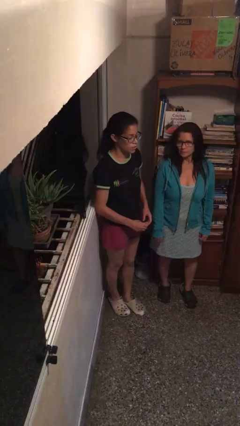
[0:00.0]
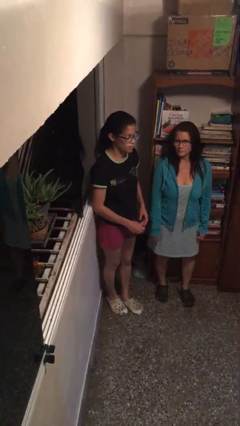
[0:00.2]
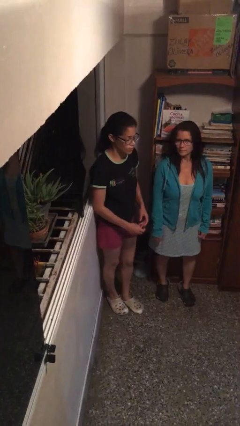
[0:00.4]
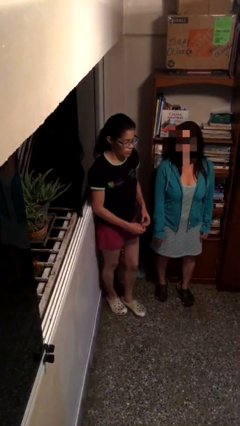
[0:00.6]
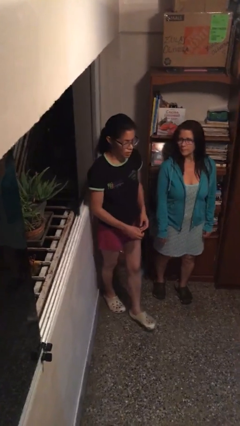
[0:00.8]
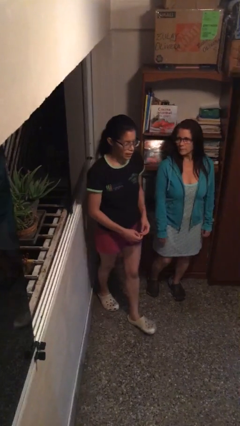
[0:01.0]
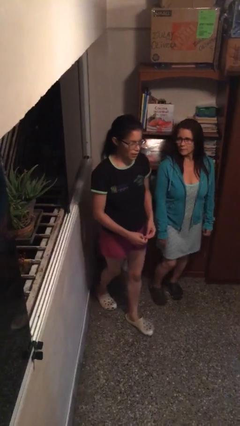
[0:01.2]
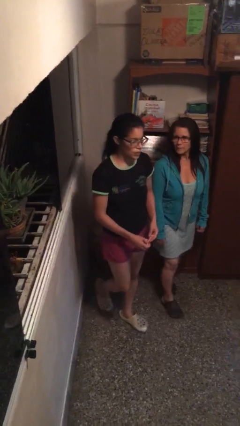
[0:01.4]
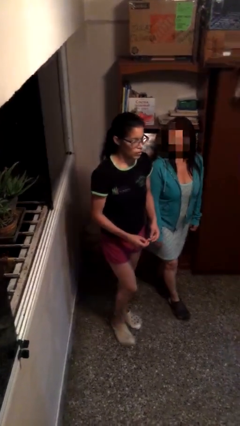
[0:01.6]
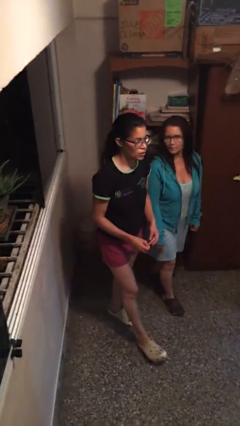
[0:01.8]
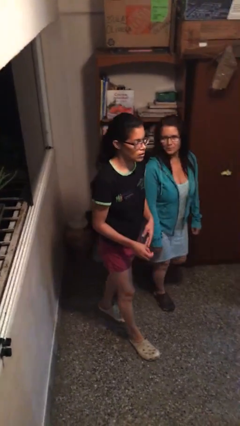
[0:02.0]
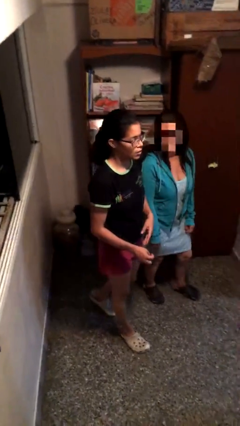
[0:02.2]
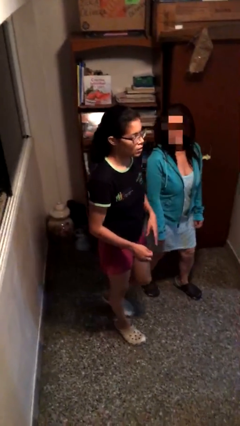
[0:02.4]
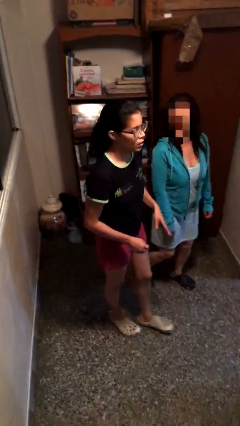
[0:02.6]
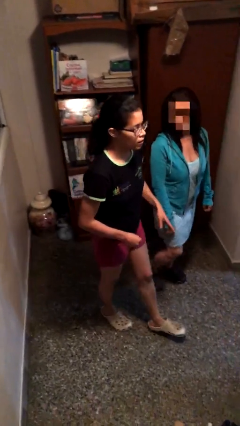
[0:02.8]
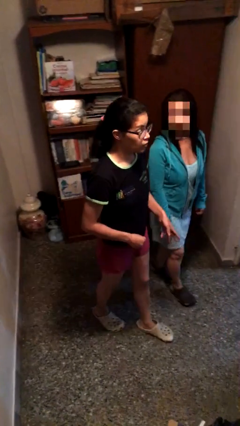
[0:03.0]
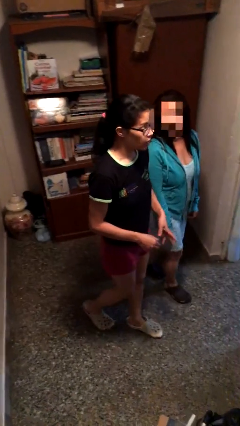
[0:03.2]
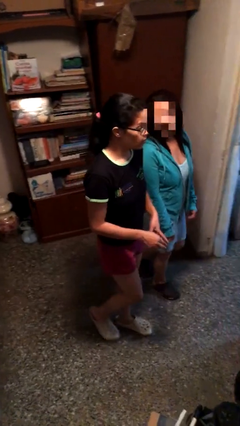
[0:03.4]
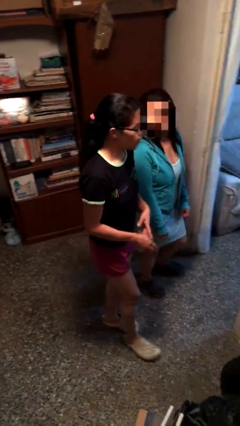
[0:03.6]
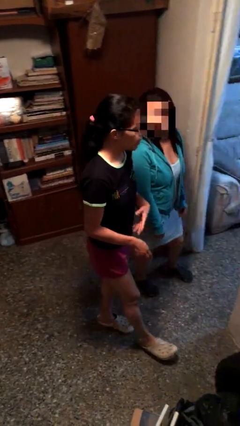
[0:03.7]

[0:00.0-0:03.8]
person talks to person

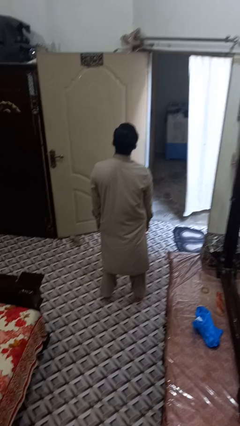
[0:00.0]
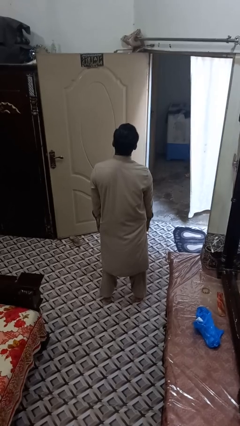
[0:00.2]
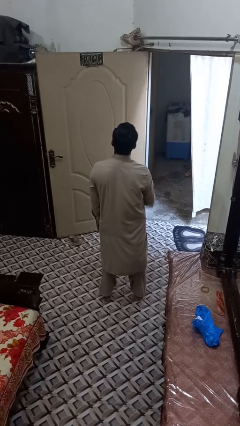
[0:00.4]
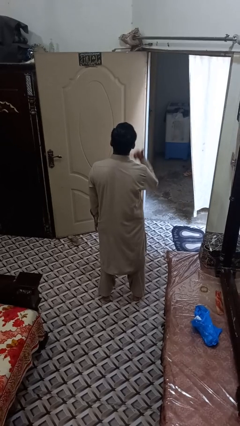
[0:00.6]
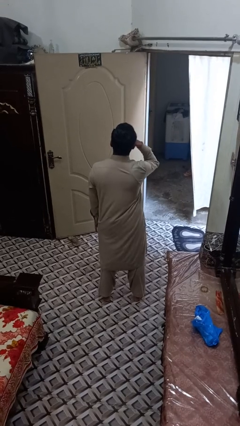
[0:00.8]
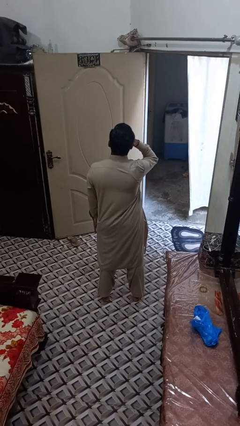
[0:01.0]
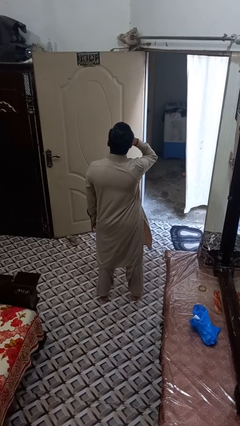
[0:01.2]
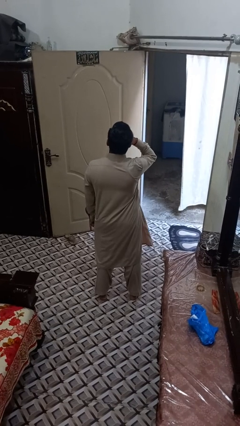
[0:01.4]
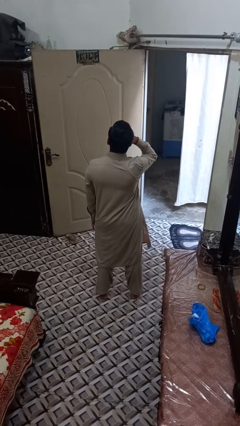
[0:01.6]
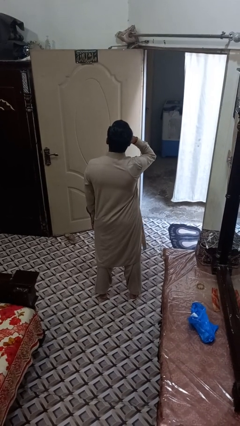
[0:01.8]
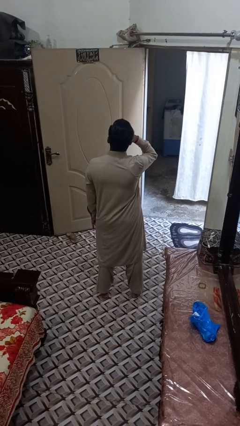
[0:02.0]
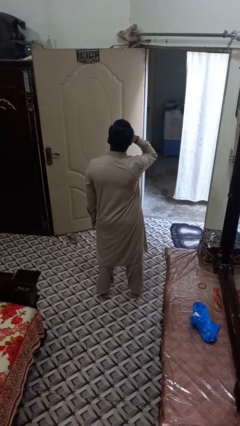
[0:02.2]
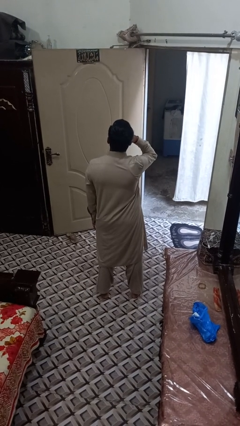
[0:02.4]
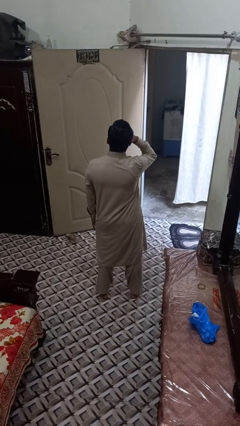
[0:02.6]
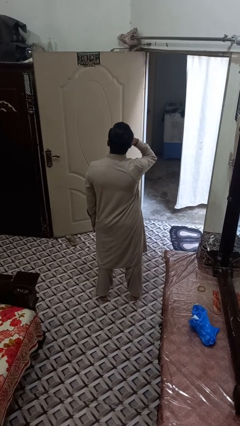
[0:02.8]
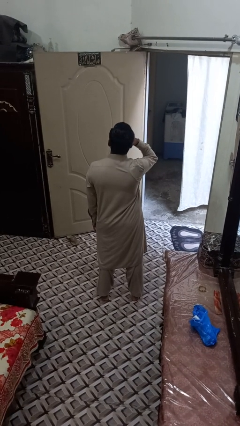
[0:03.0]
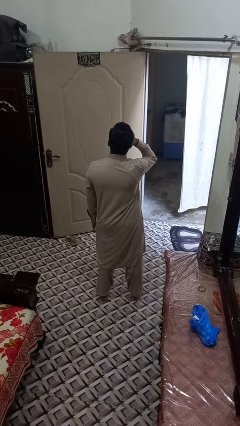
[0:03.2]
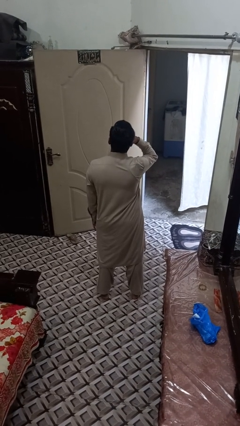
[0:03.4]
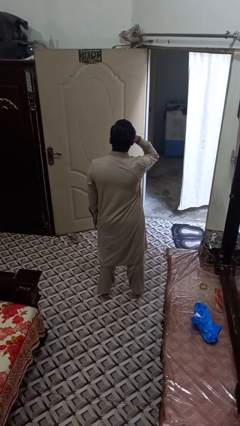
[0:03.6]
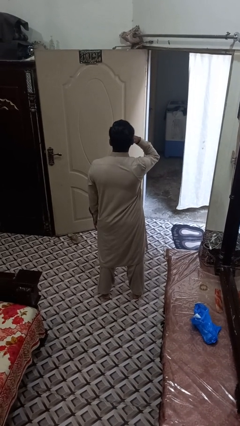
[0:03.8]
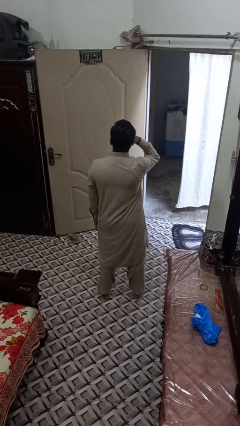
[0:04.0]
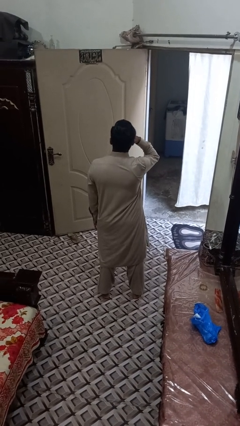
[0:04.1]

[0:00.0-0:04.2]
person gestures call me

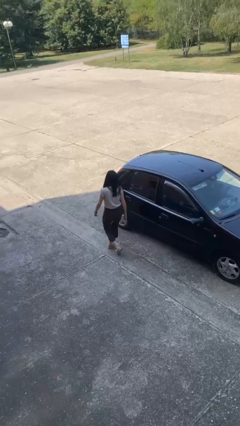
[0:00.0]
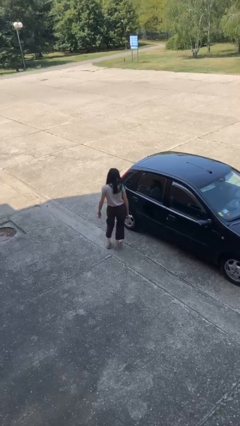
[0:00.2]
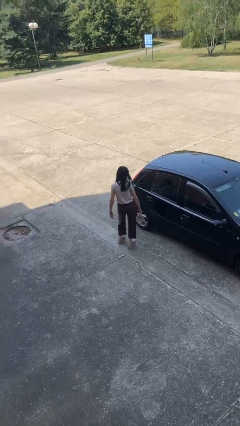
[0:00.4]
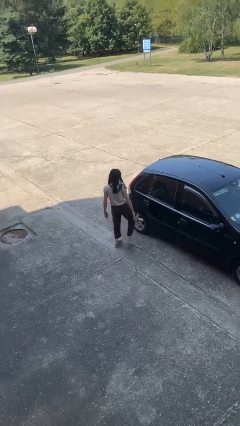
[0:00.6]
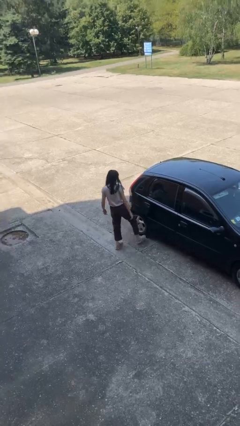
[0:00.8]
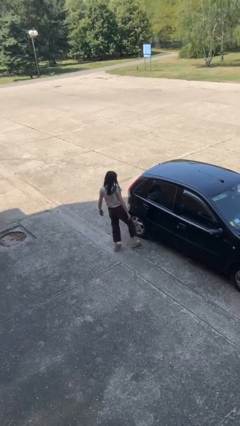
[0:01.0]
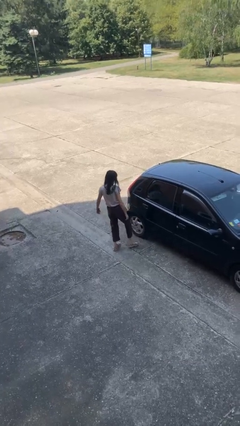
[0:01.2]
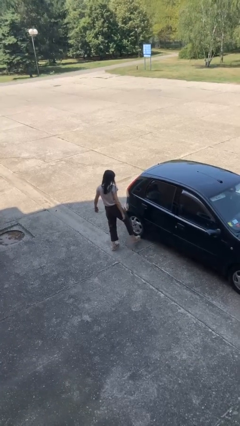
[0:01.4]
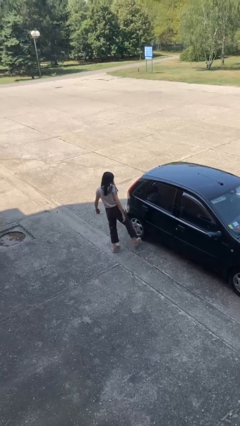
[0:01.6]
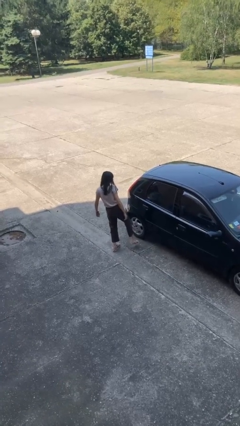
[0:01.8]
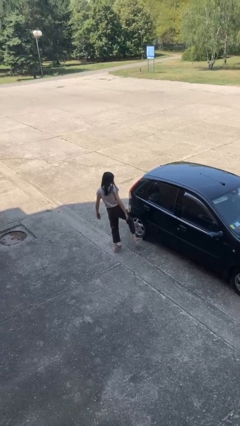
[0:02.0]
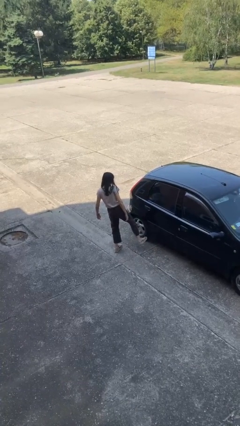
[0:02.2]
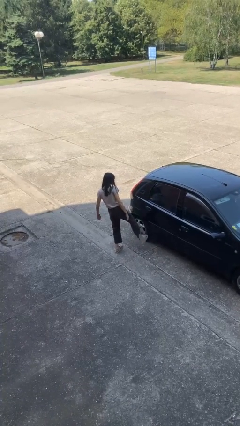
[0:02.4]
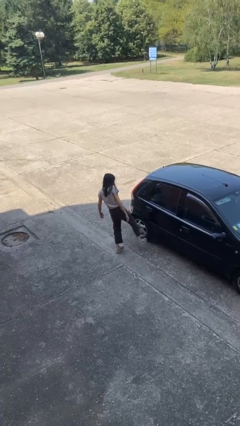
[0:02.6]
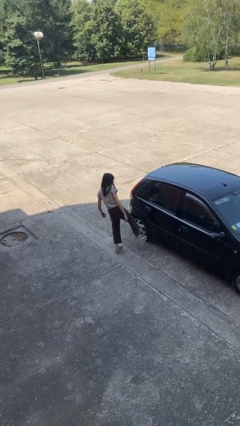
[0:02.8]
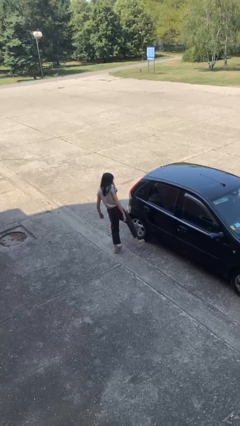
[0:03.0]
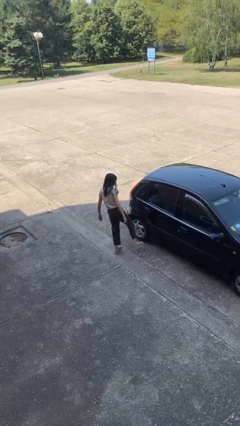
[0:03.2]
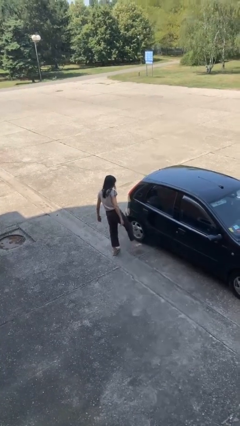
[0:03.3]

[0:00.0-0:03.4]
person kicks car tires

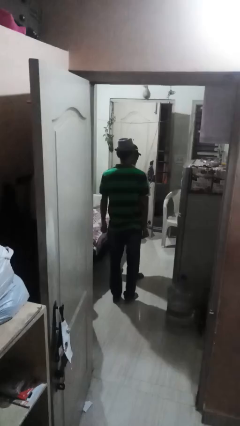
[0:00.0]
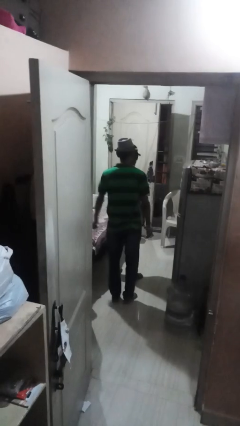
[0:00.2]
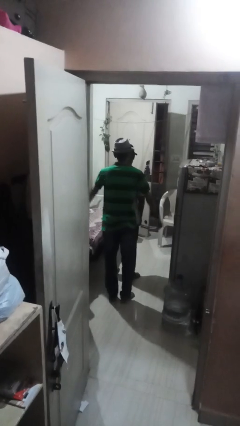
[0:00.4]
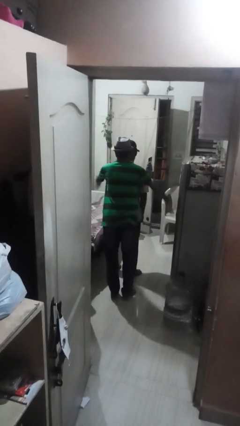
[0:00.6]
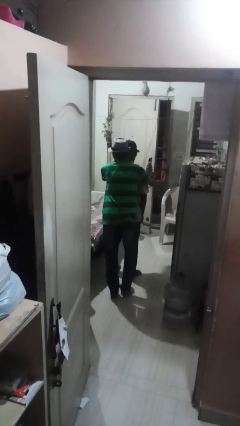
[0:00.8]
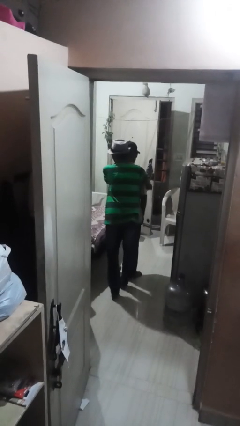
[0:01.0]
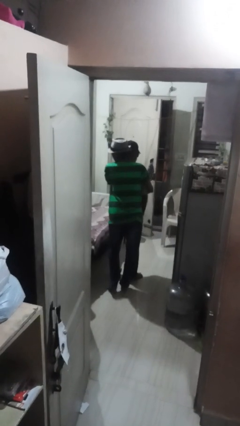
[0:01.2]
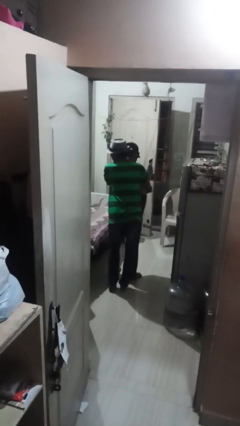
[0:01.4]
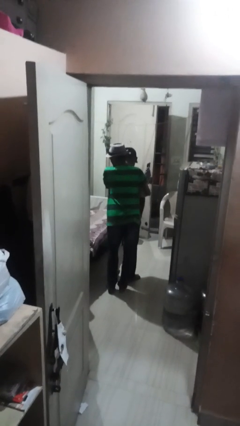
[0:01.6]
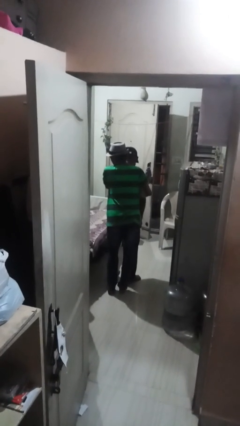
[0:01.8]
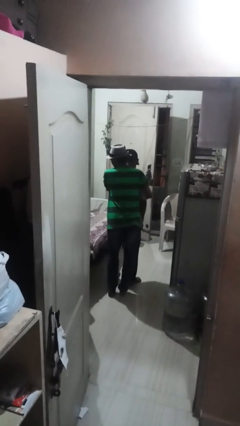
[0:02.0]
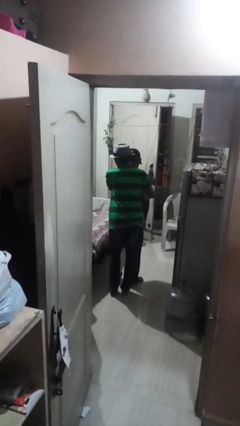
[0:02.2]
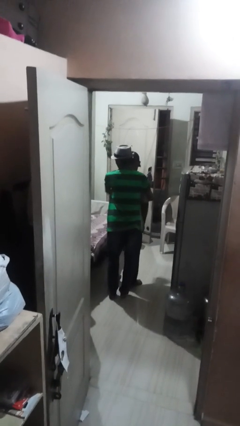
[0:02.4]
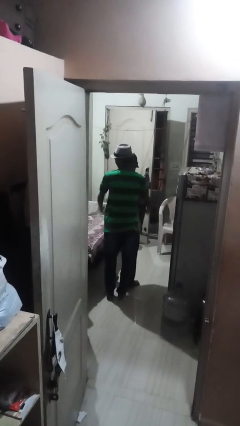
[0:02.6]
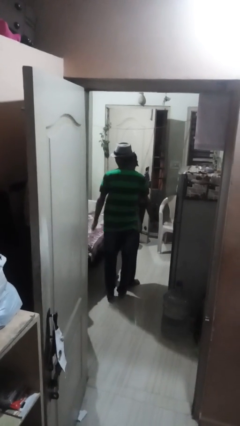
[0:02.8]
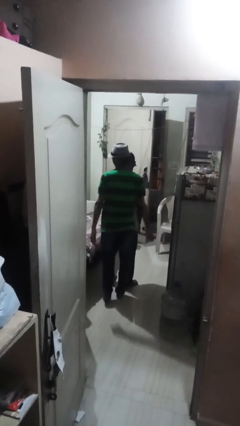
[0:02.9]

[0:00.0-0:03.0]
person hugs person from behind

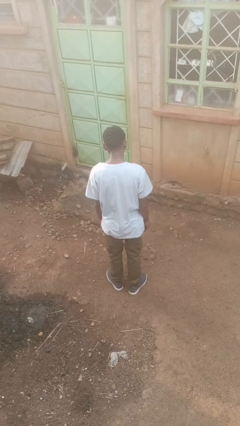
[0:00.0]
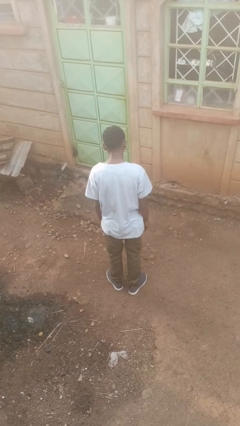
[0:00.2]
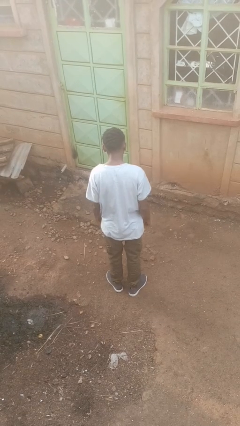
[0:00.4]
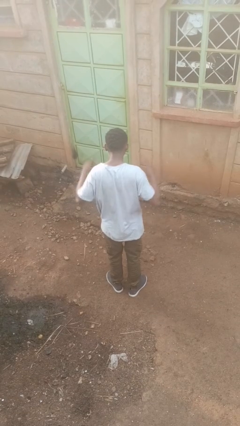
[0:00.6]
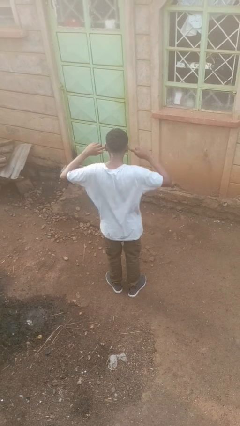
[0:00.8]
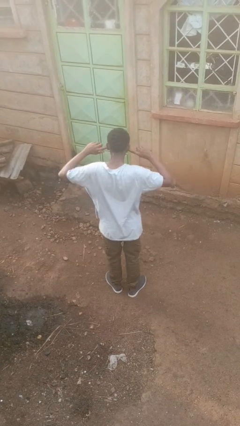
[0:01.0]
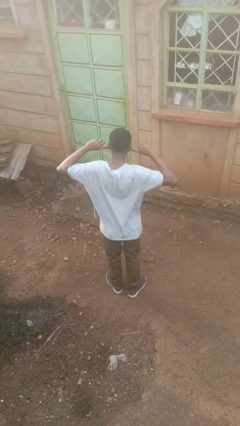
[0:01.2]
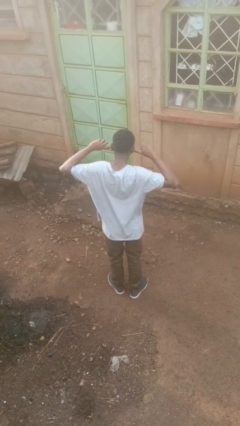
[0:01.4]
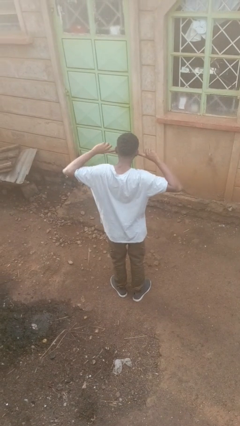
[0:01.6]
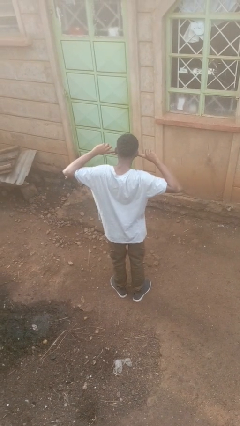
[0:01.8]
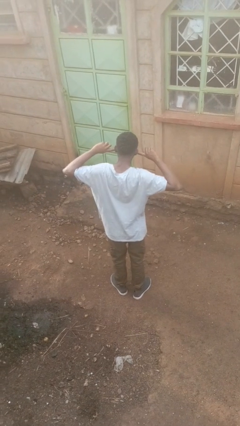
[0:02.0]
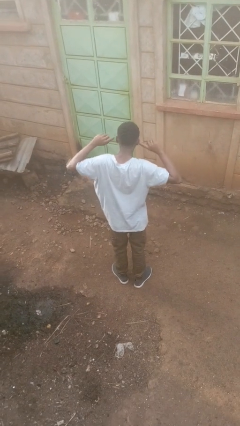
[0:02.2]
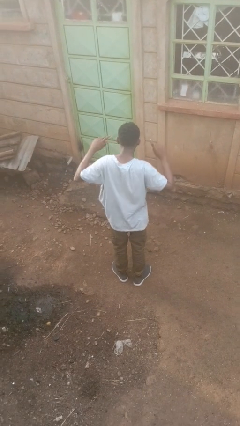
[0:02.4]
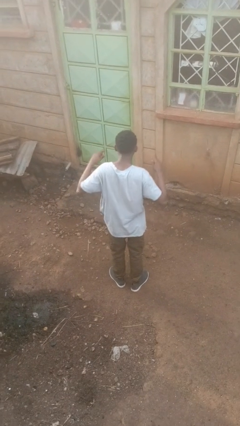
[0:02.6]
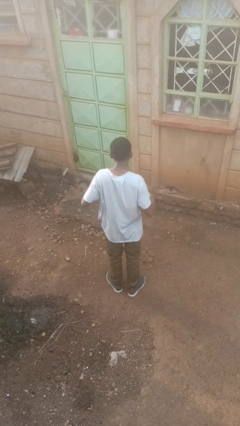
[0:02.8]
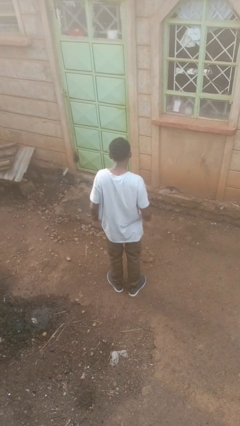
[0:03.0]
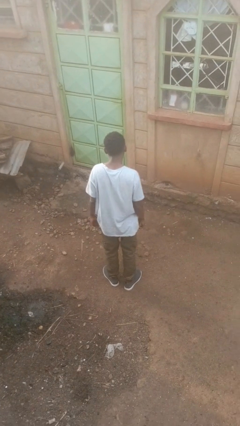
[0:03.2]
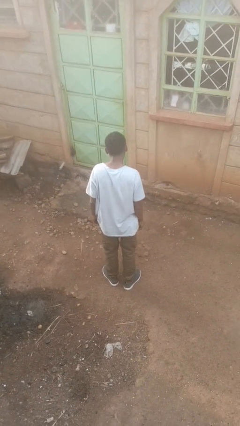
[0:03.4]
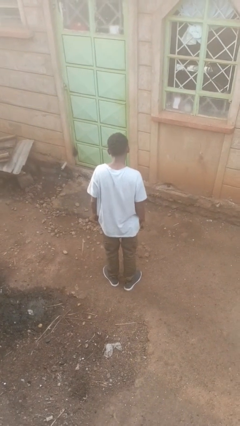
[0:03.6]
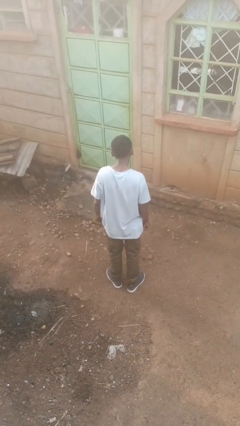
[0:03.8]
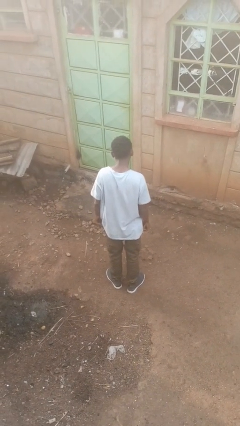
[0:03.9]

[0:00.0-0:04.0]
person puts fingers in ear
